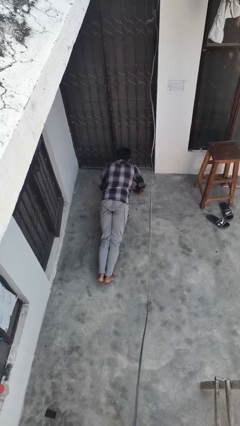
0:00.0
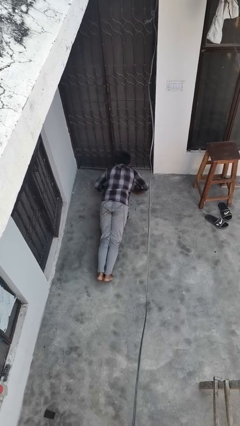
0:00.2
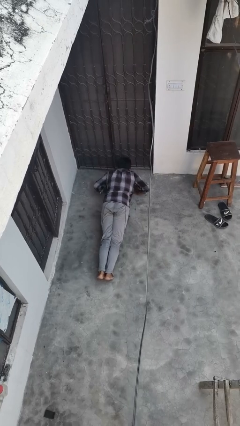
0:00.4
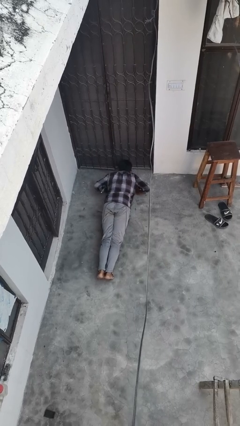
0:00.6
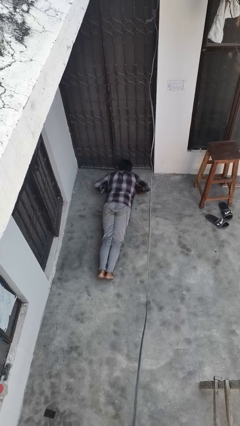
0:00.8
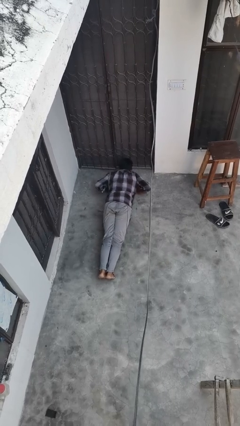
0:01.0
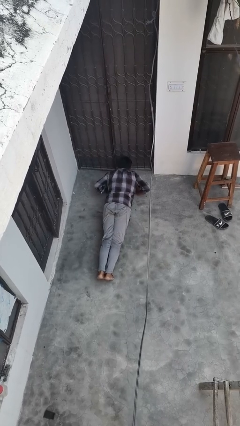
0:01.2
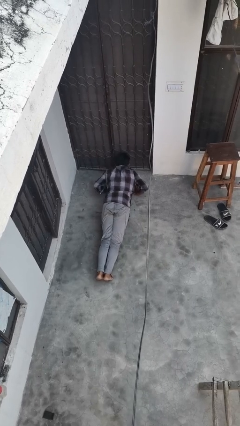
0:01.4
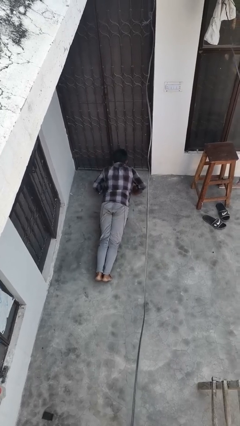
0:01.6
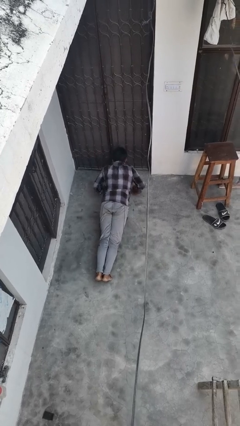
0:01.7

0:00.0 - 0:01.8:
person exercises with pushup

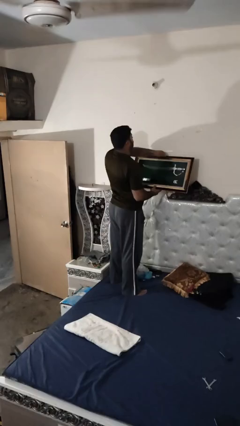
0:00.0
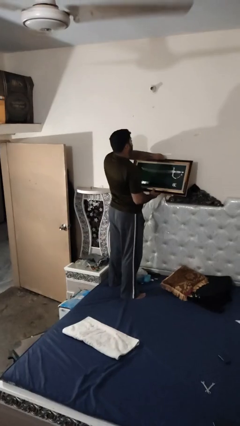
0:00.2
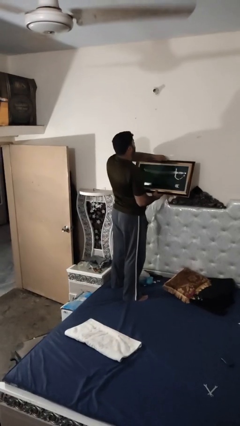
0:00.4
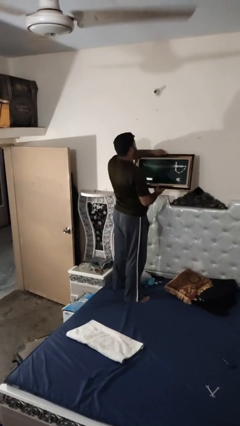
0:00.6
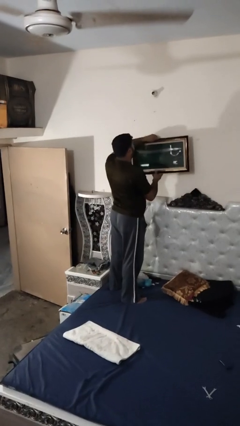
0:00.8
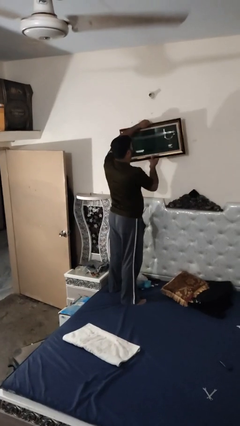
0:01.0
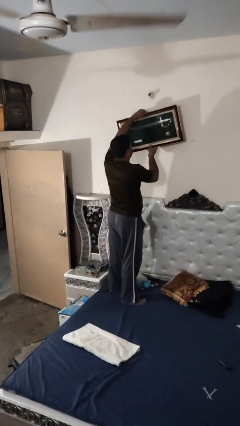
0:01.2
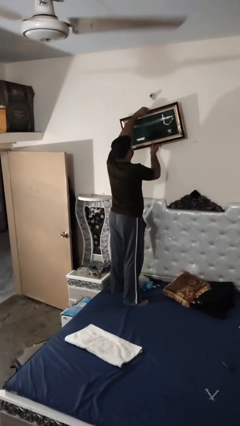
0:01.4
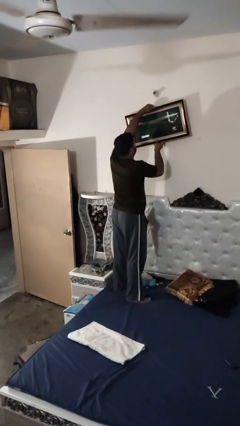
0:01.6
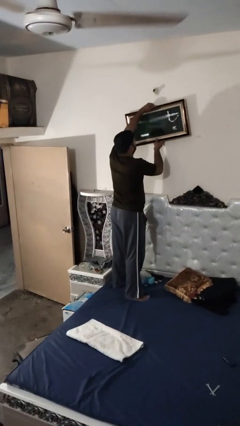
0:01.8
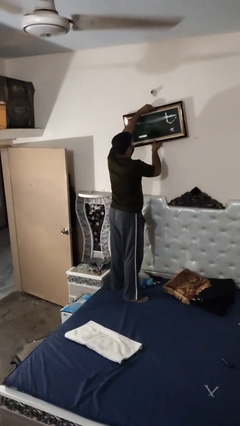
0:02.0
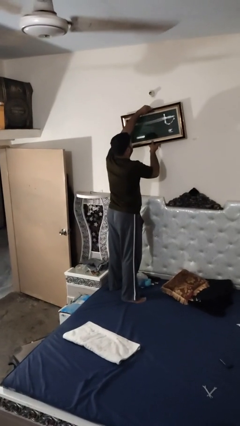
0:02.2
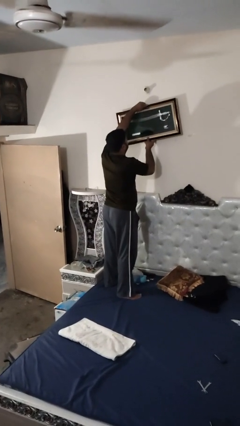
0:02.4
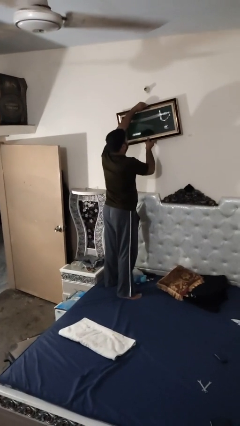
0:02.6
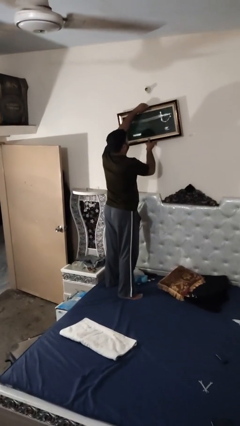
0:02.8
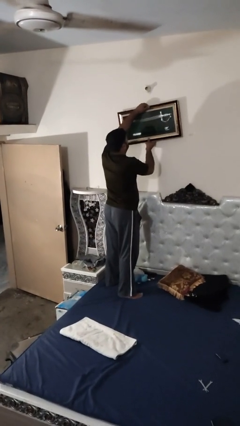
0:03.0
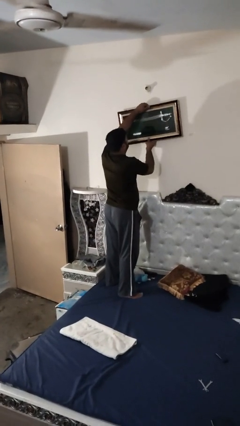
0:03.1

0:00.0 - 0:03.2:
person puts up picture frame

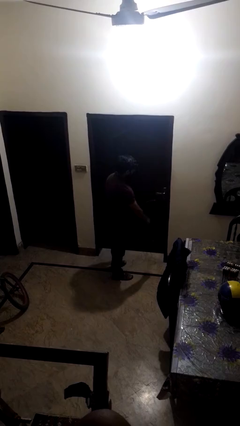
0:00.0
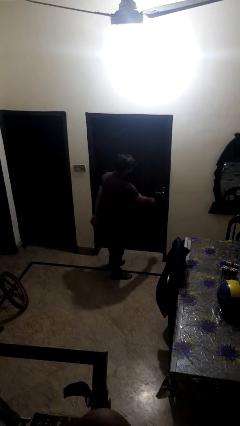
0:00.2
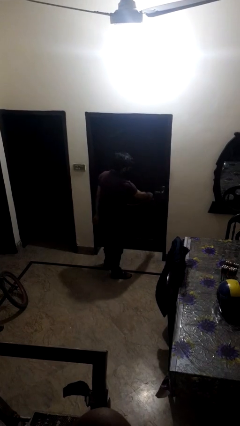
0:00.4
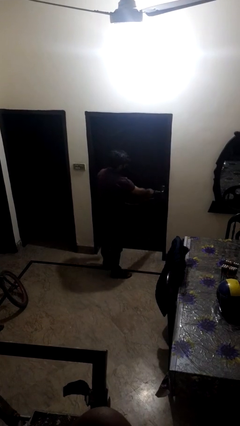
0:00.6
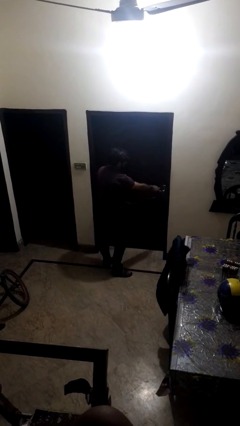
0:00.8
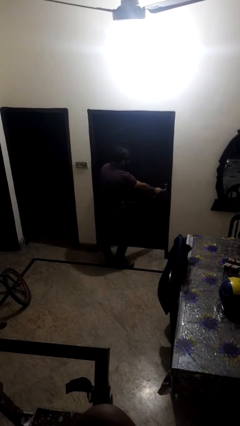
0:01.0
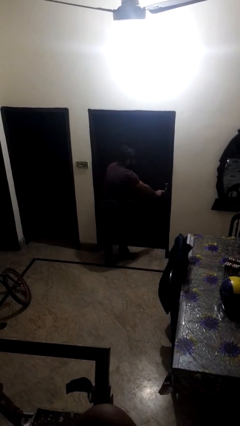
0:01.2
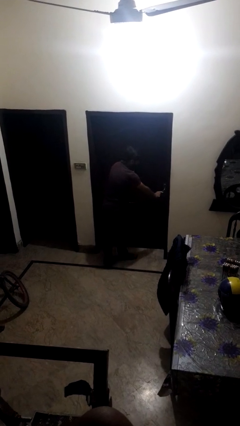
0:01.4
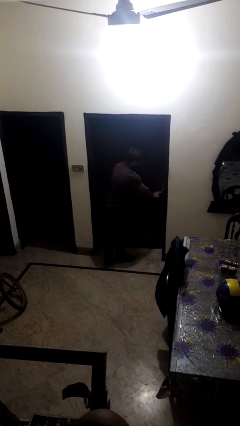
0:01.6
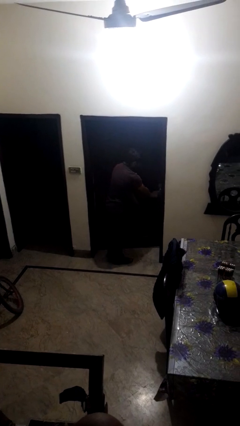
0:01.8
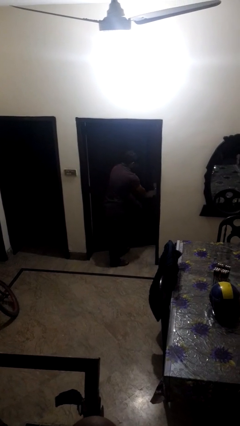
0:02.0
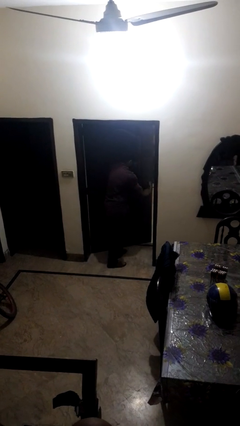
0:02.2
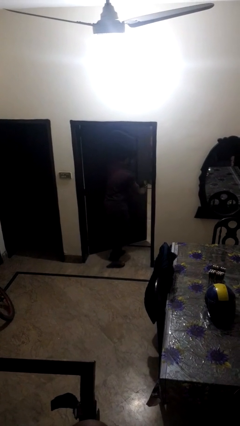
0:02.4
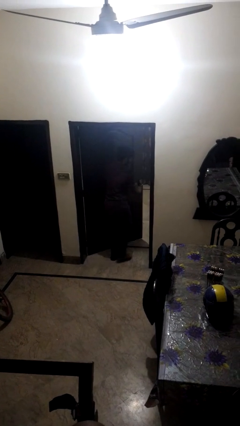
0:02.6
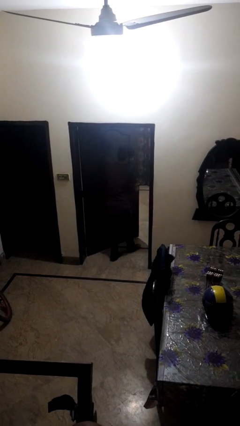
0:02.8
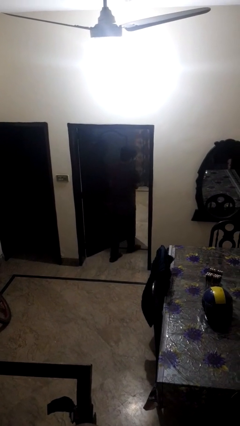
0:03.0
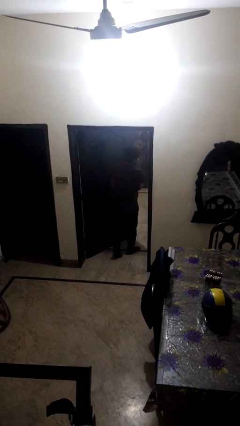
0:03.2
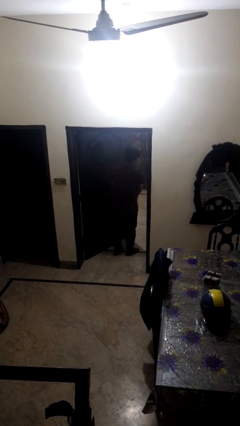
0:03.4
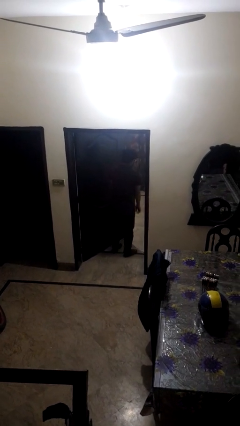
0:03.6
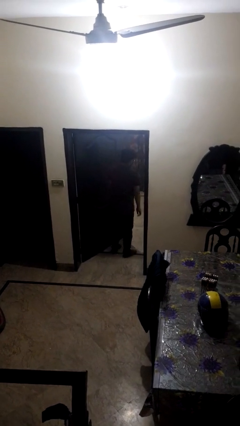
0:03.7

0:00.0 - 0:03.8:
person opens facility door

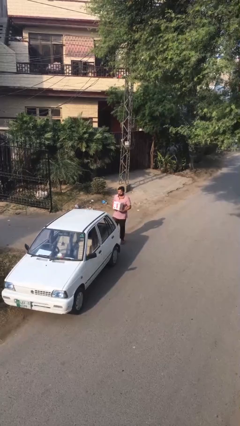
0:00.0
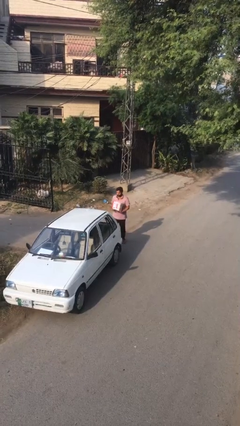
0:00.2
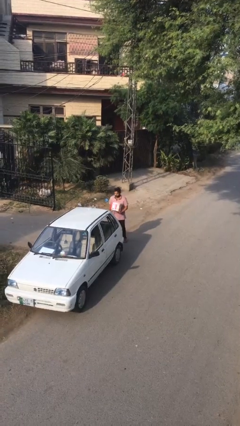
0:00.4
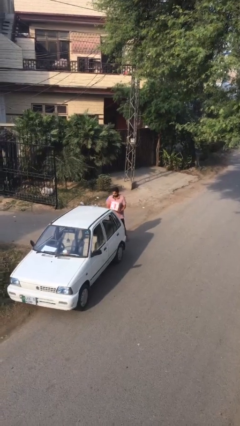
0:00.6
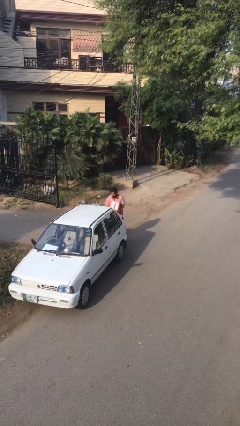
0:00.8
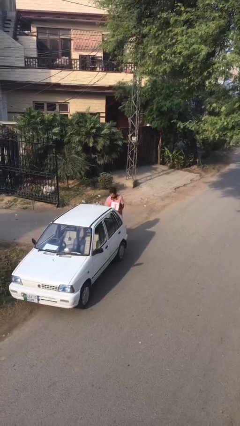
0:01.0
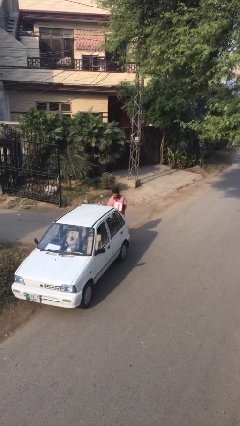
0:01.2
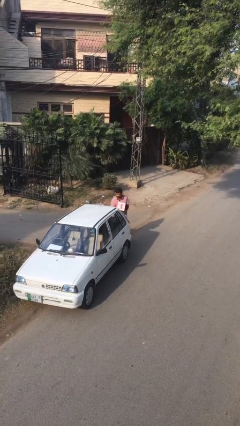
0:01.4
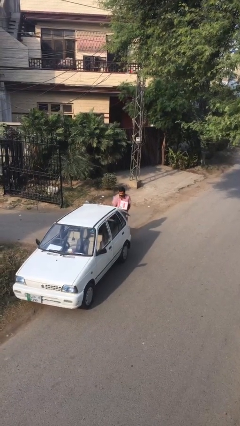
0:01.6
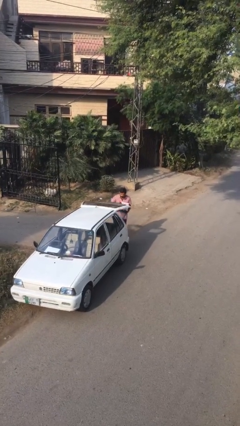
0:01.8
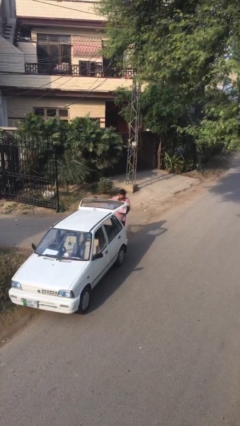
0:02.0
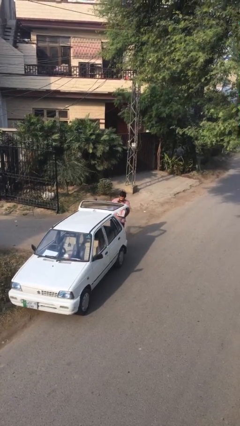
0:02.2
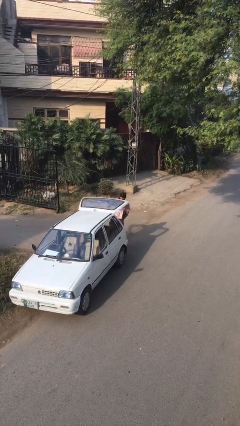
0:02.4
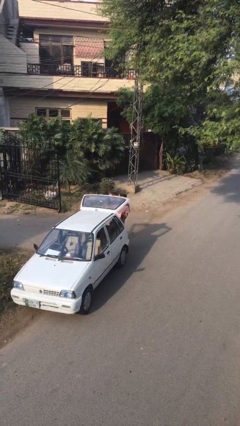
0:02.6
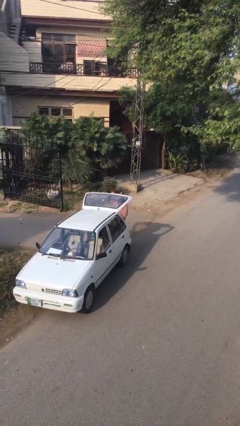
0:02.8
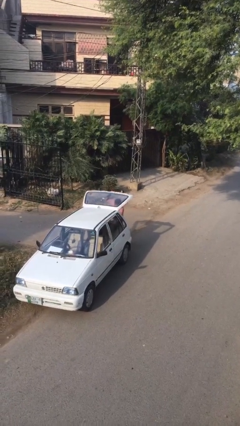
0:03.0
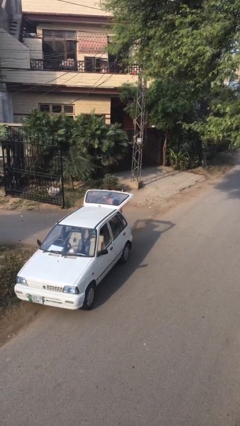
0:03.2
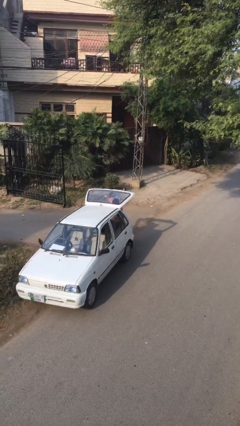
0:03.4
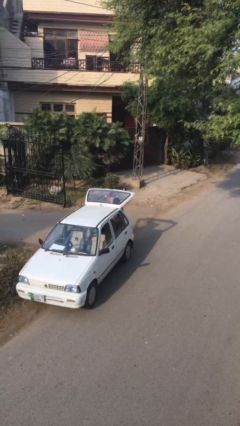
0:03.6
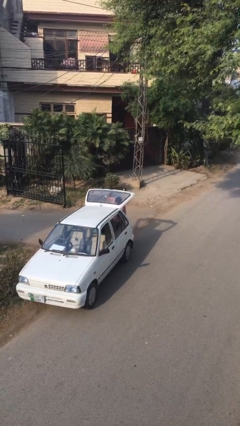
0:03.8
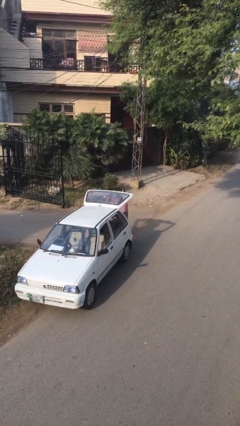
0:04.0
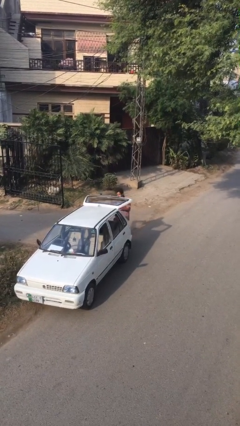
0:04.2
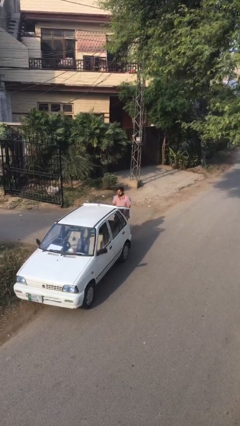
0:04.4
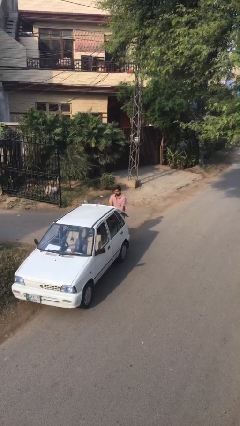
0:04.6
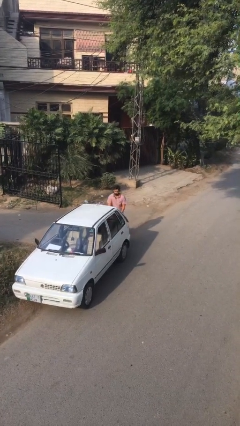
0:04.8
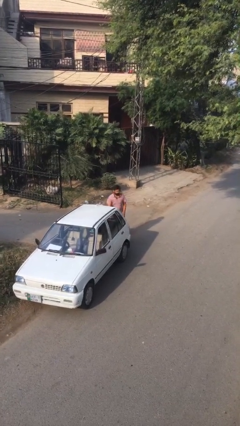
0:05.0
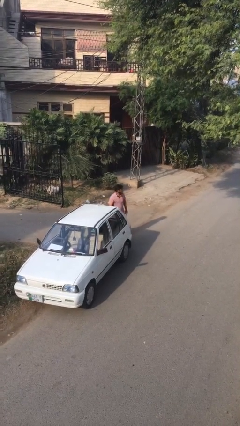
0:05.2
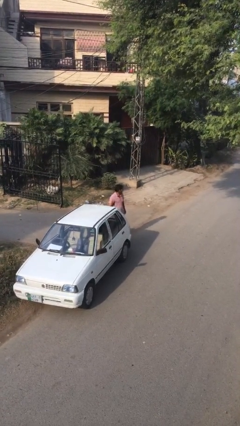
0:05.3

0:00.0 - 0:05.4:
person loads car

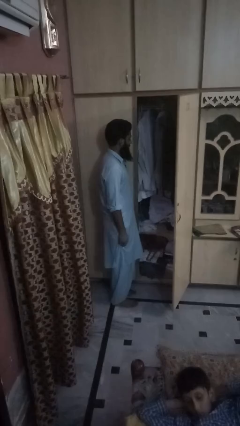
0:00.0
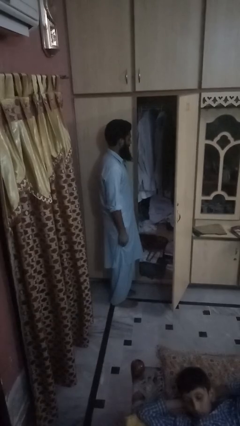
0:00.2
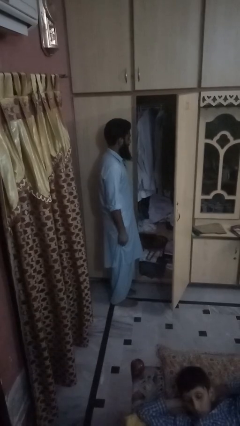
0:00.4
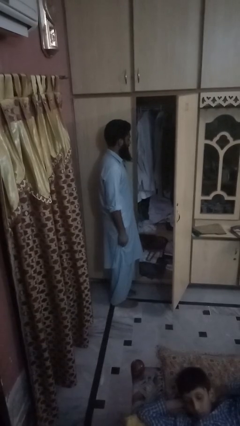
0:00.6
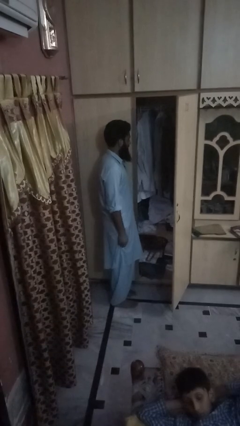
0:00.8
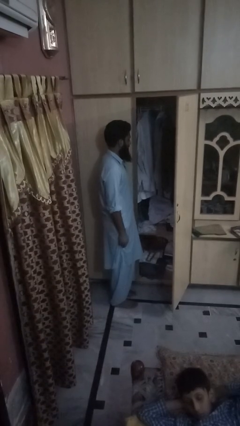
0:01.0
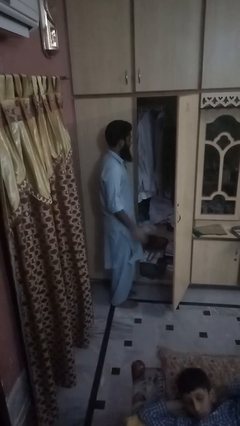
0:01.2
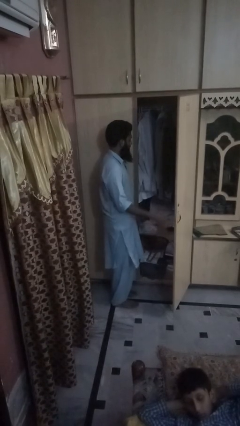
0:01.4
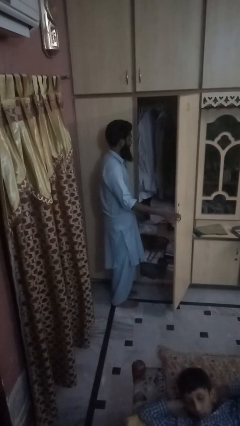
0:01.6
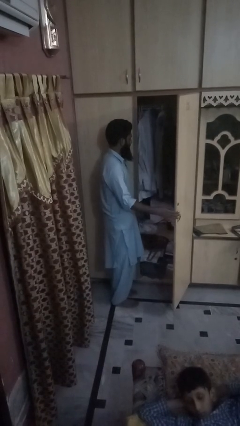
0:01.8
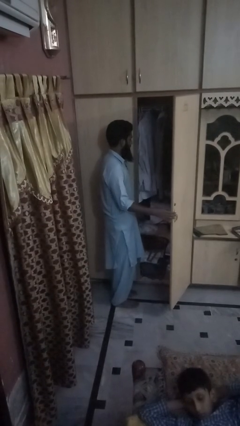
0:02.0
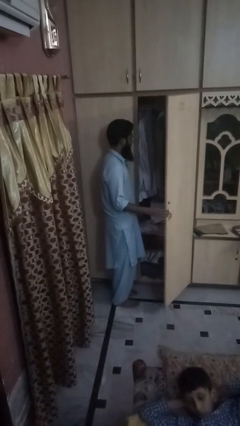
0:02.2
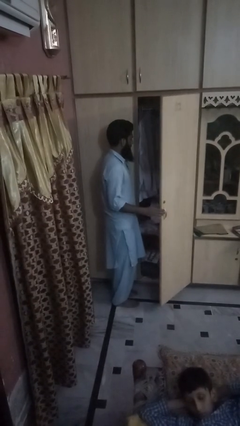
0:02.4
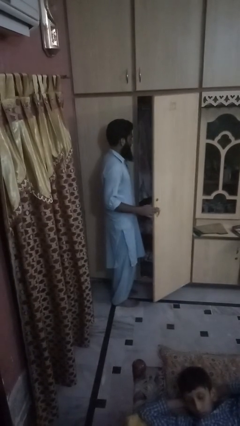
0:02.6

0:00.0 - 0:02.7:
person closes dresser drawer

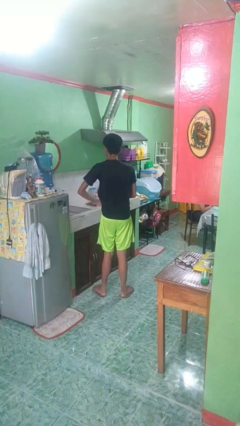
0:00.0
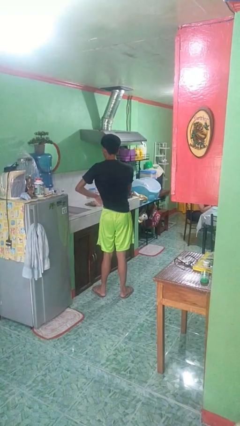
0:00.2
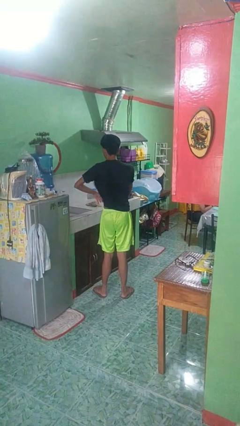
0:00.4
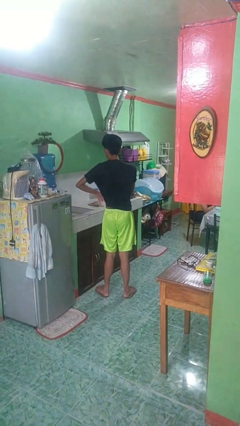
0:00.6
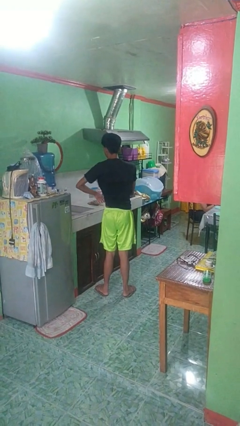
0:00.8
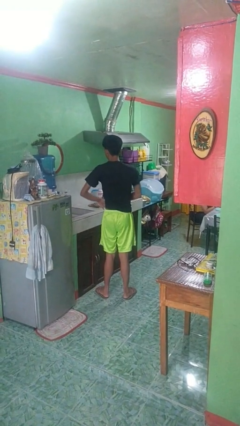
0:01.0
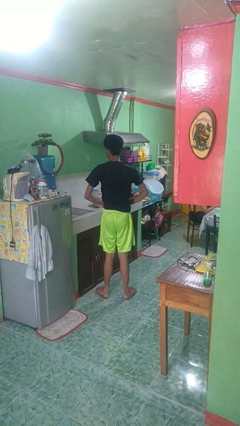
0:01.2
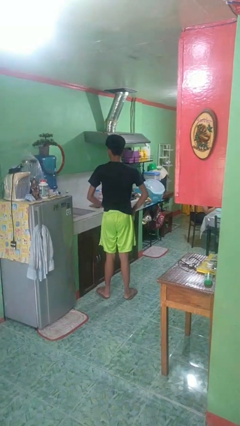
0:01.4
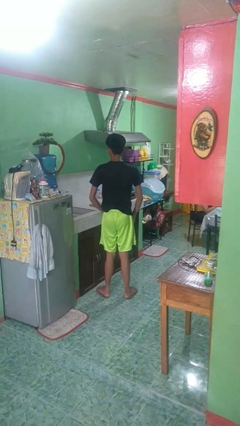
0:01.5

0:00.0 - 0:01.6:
person applies deodorant
